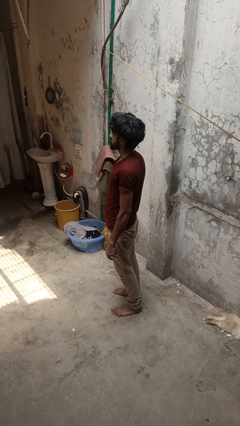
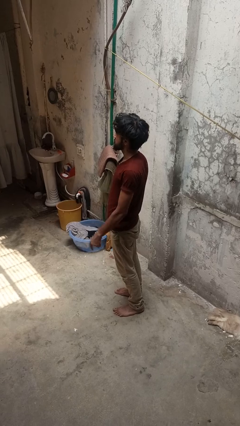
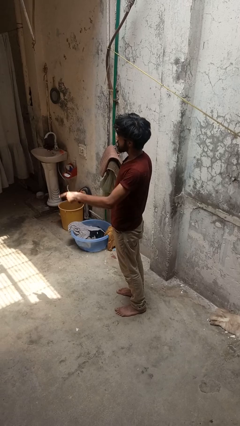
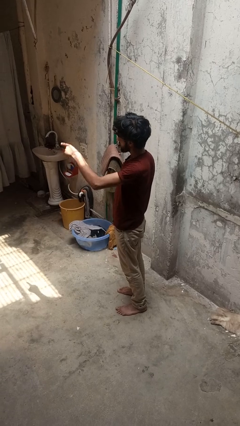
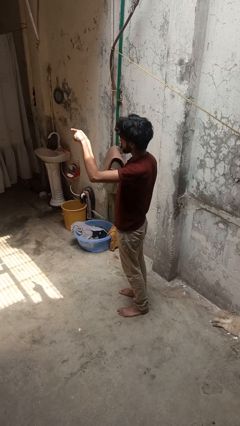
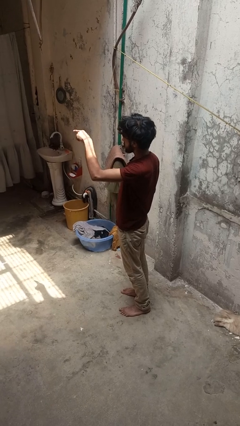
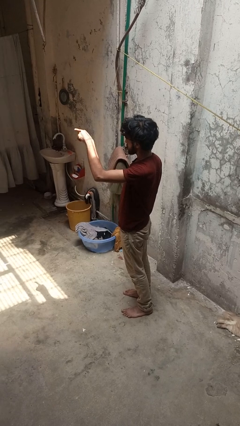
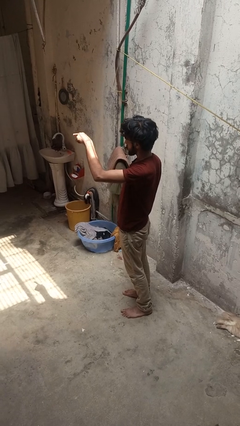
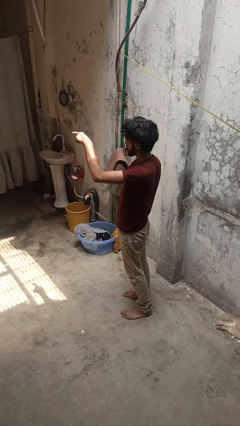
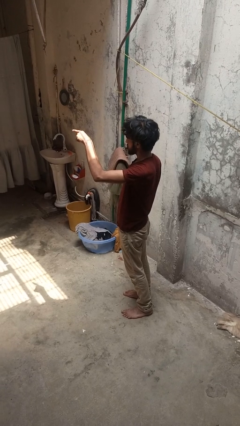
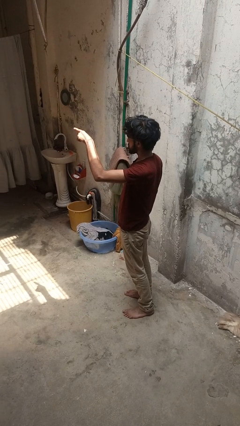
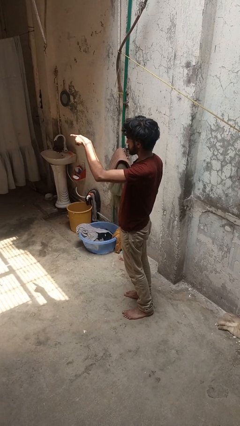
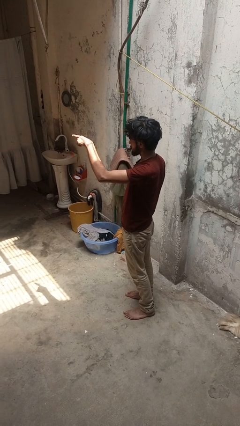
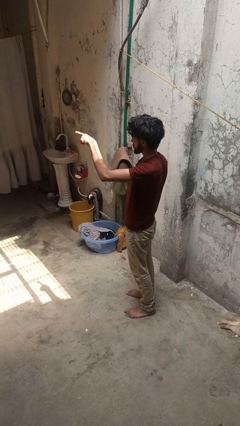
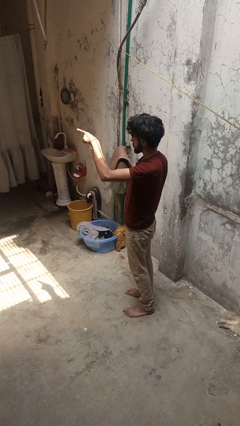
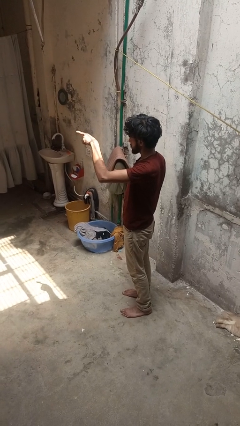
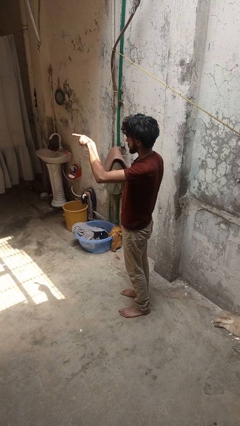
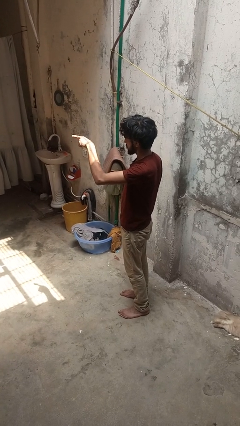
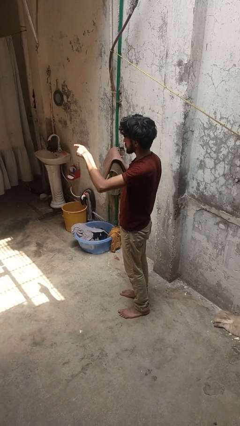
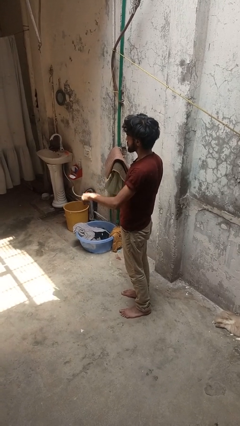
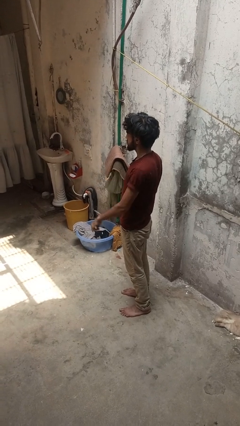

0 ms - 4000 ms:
person points at person

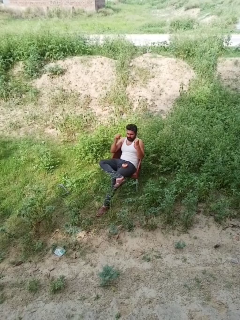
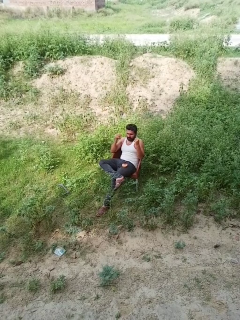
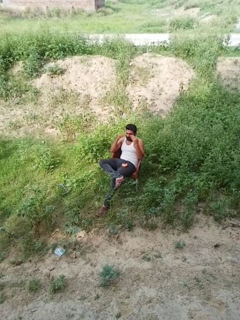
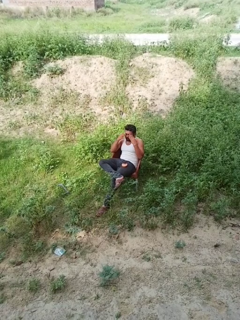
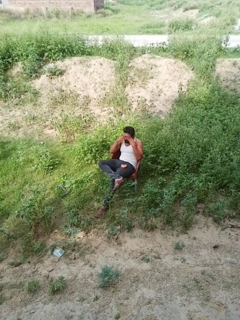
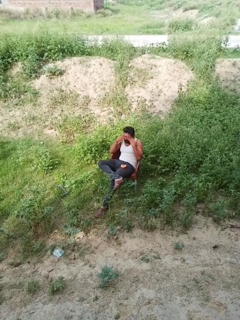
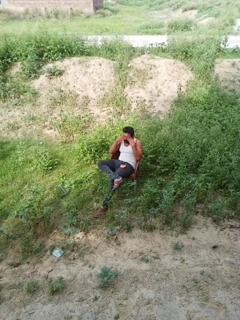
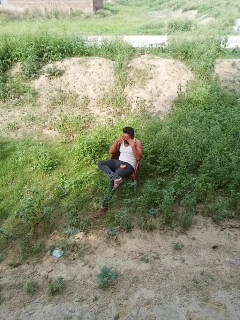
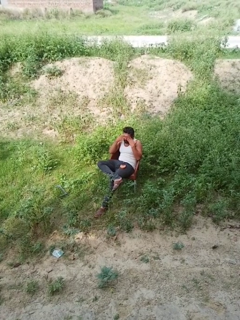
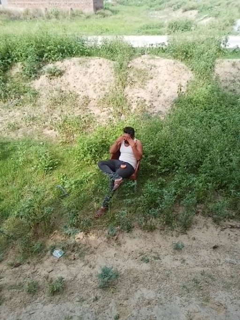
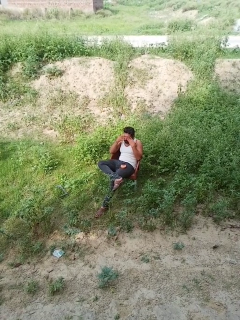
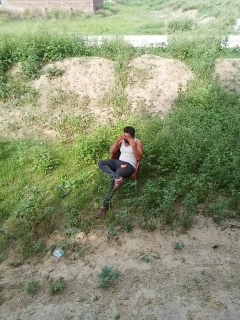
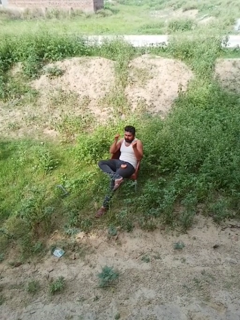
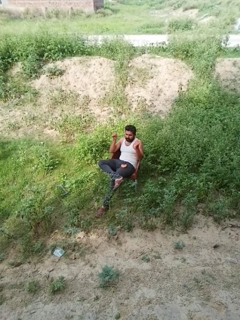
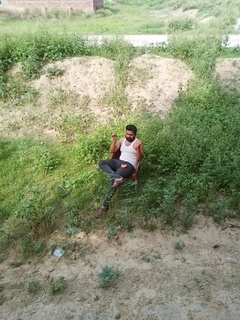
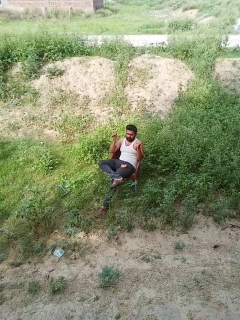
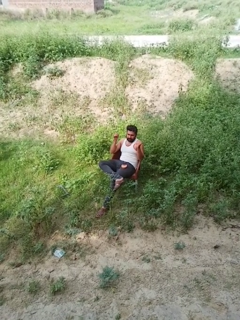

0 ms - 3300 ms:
person rubs eyes

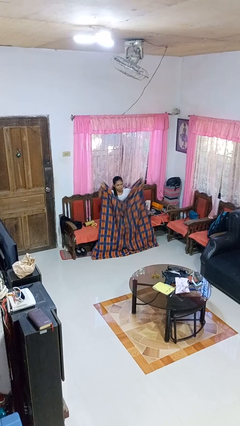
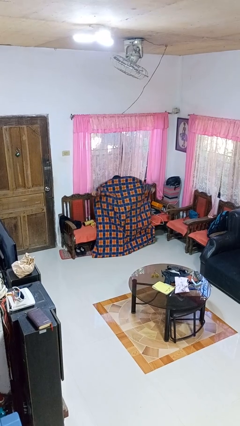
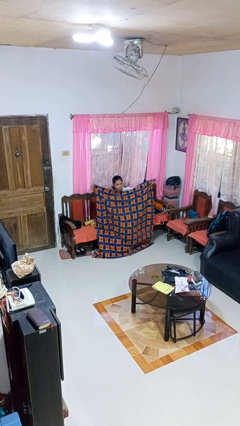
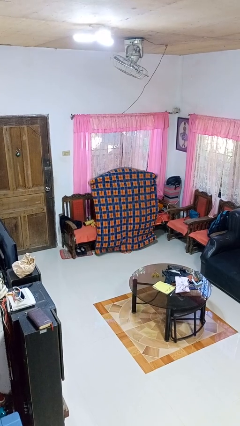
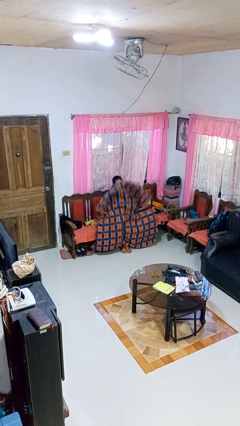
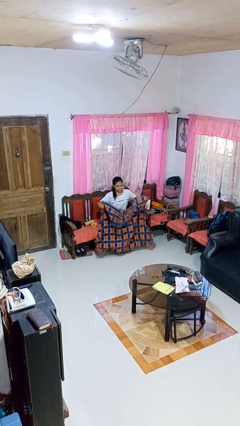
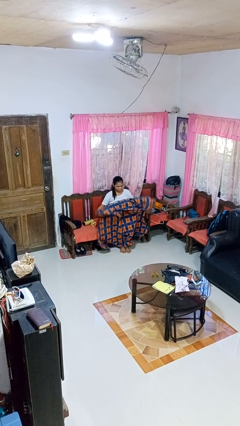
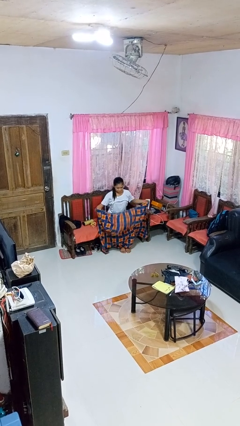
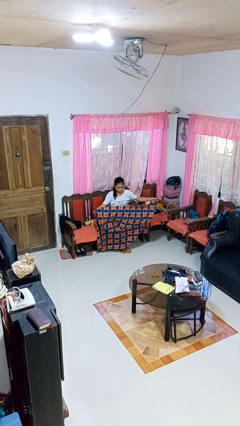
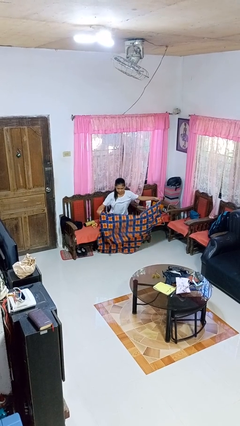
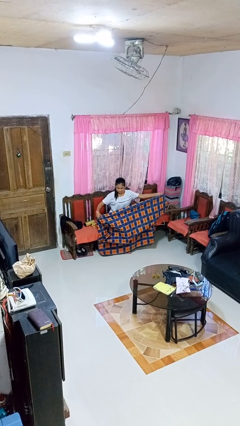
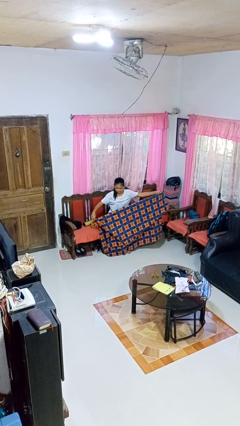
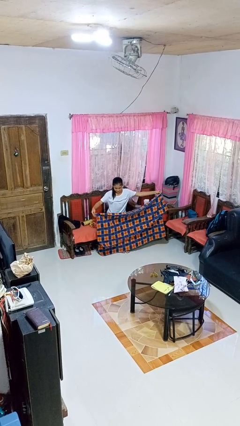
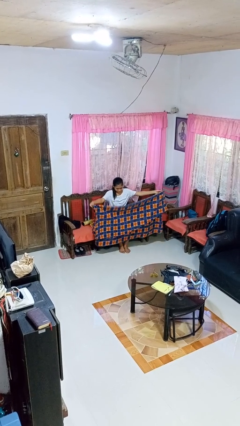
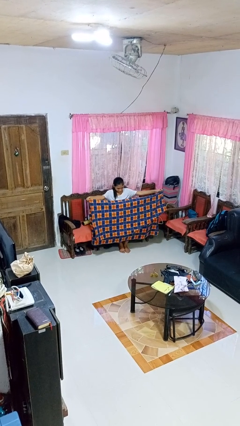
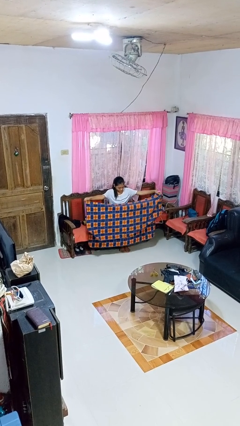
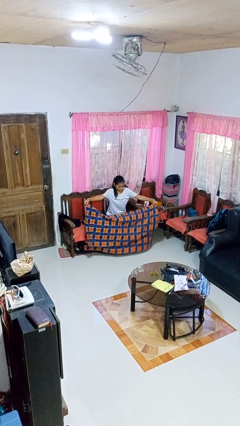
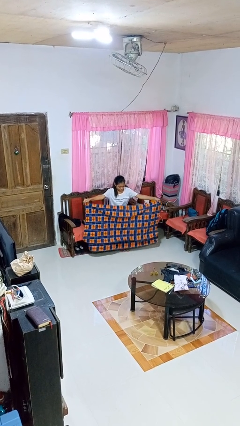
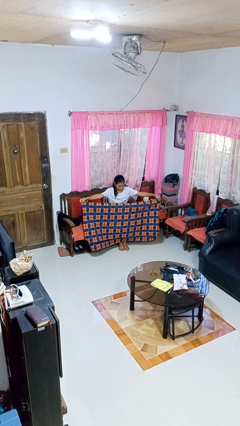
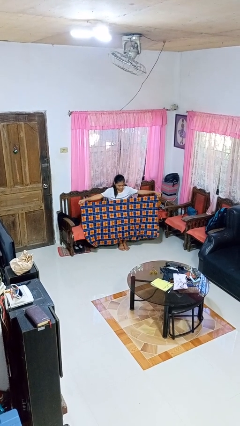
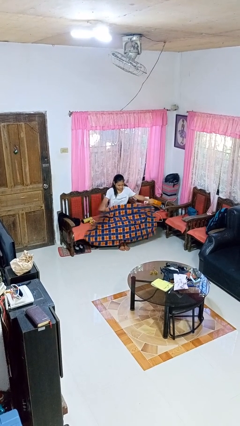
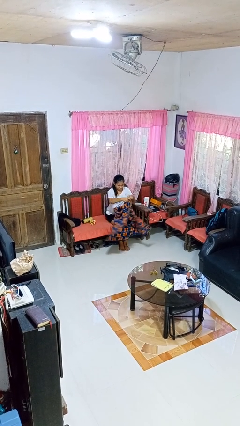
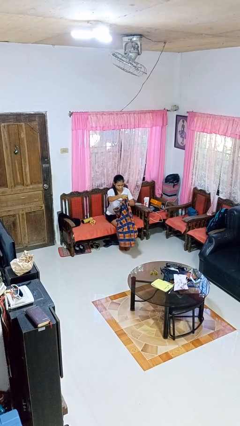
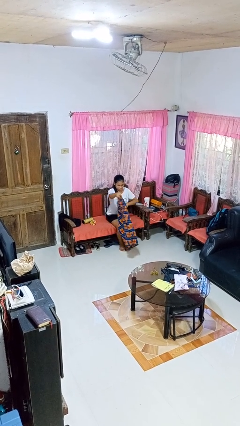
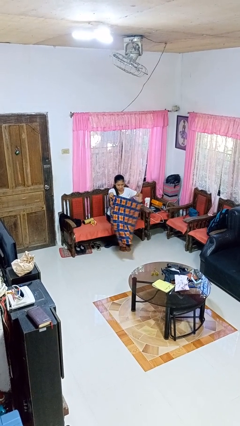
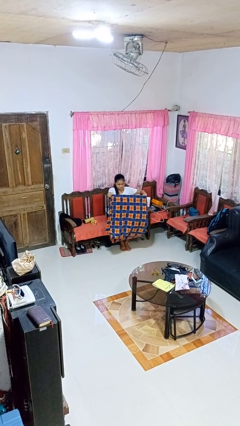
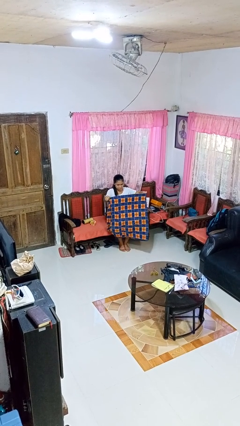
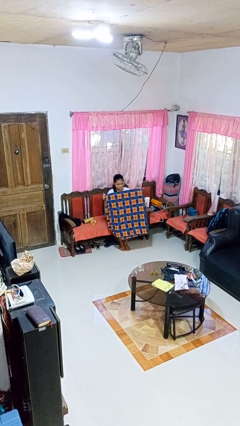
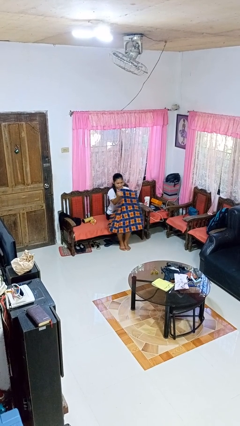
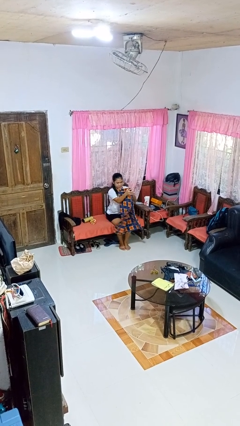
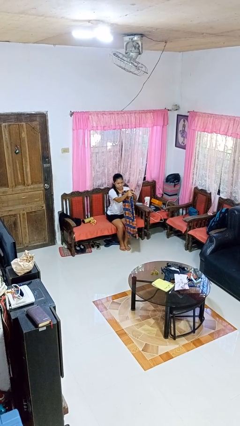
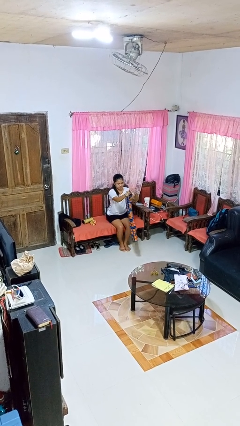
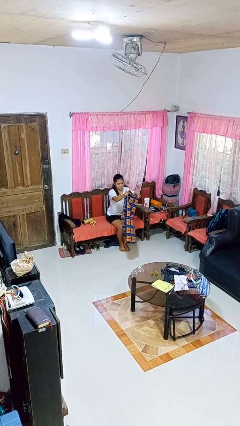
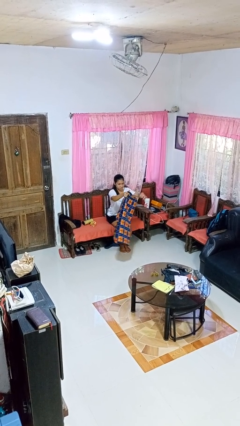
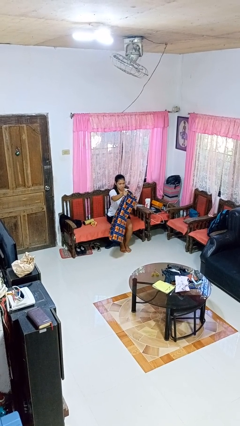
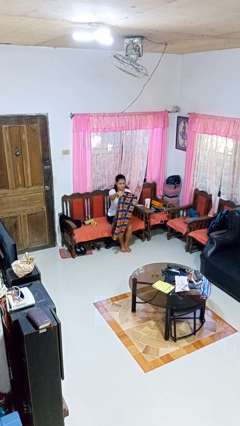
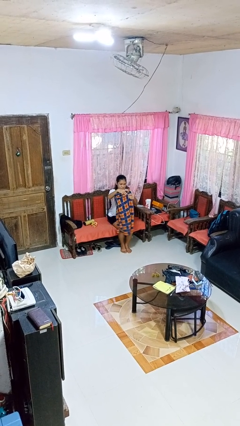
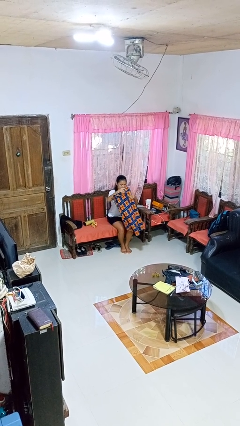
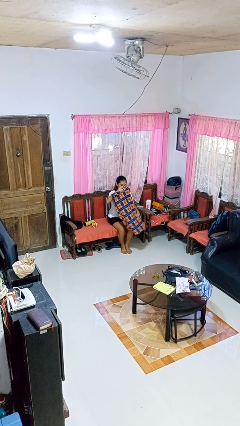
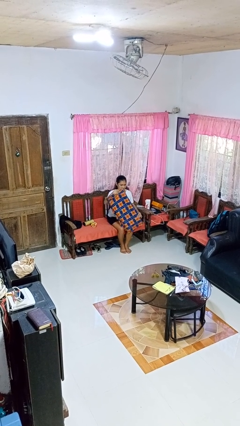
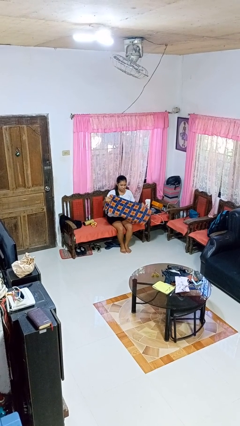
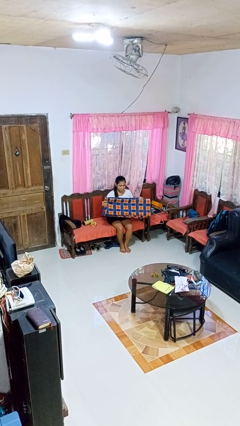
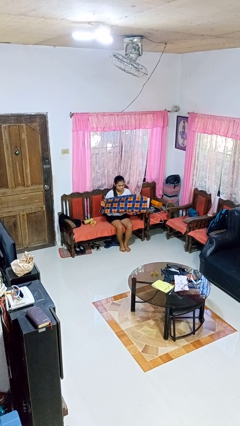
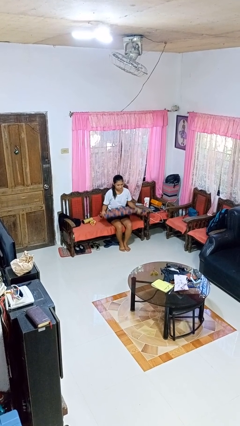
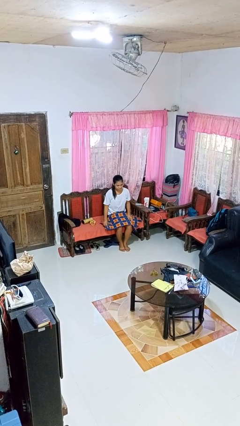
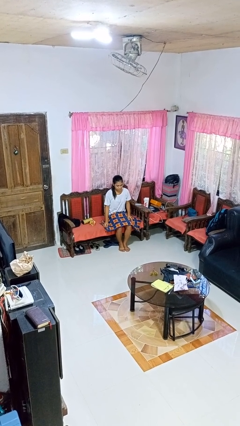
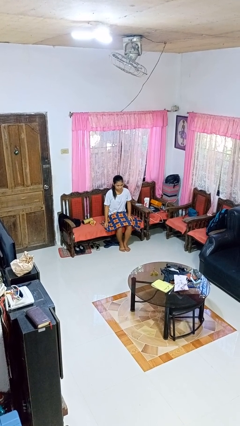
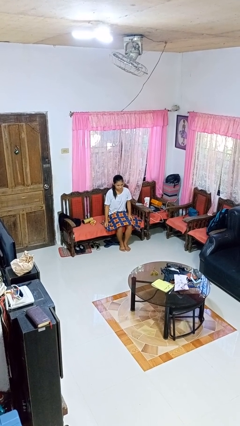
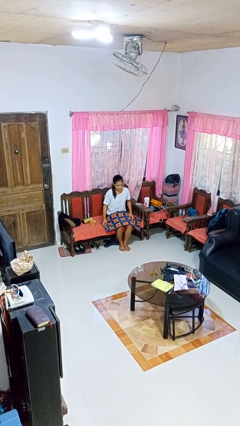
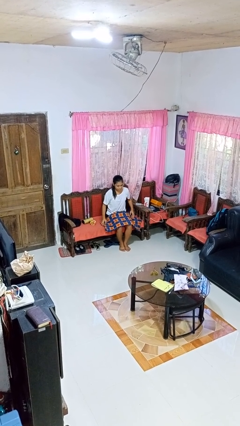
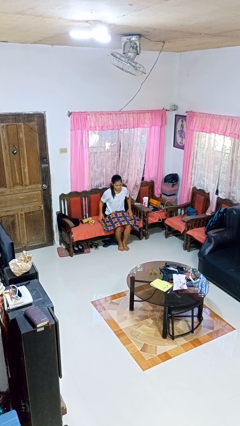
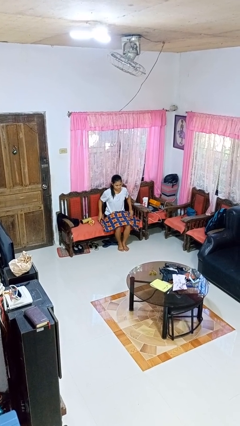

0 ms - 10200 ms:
person folds blanket

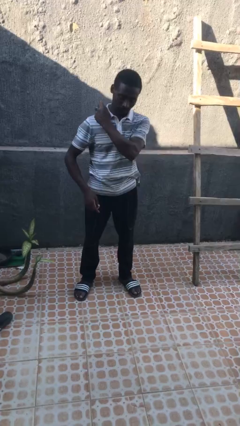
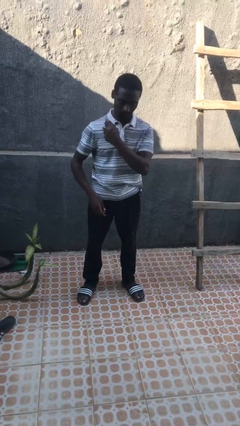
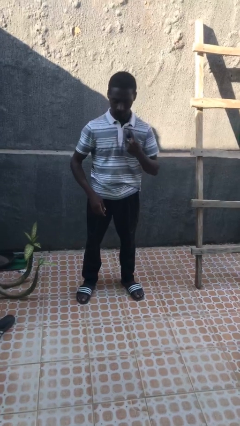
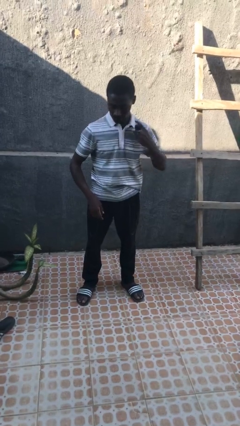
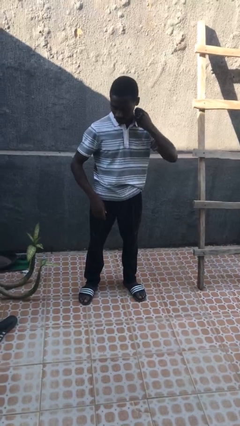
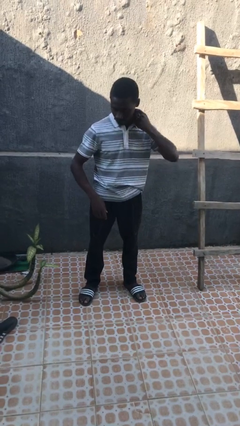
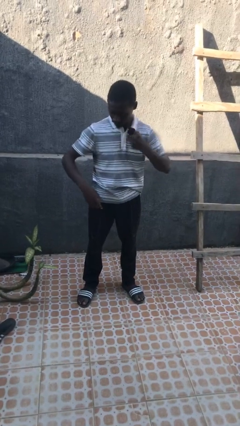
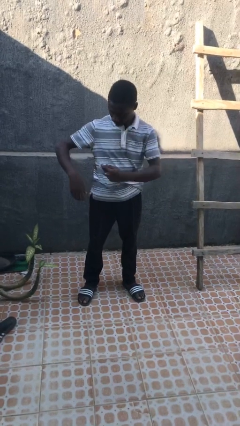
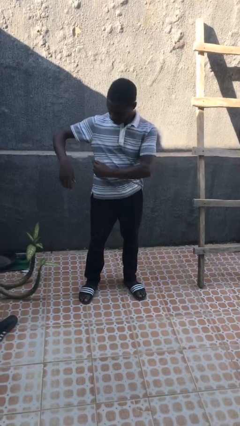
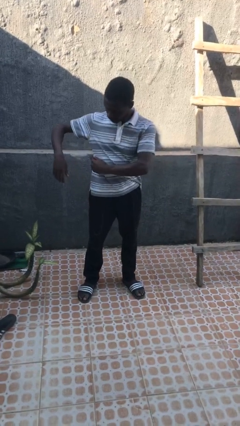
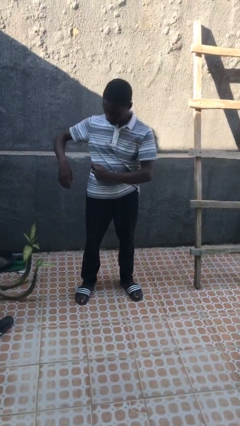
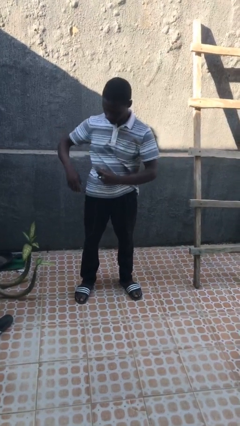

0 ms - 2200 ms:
person applies deodorant
